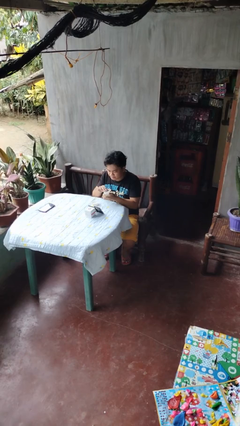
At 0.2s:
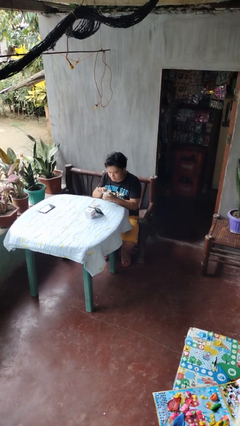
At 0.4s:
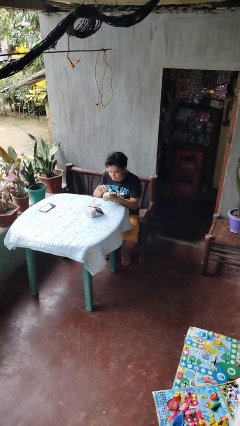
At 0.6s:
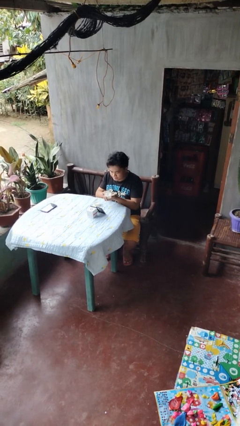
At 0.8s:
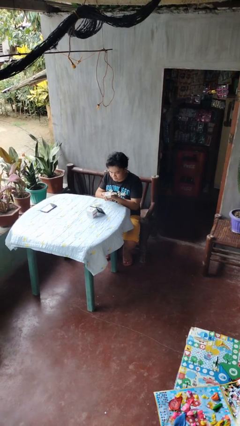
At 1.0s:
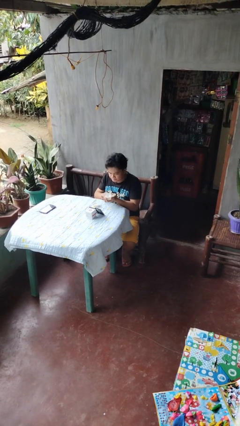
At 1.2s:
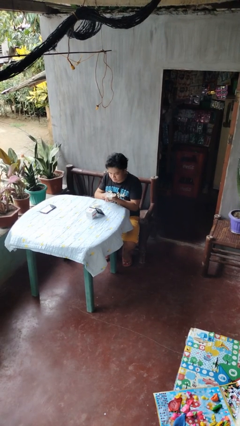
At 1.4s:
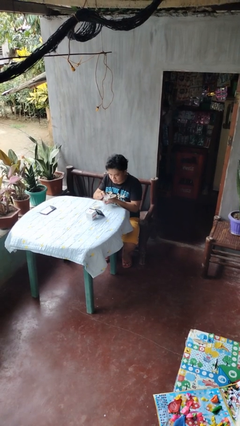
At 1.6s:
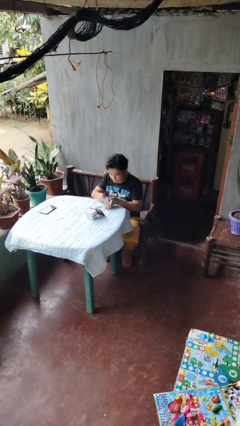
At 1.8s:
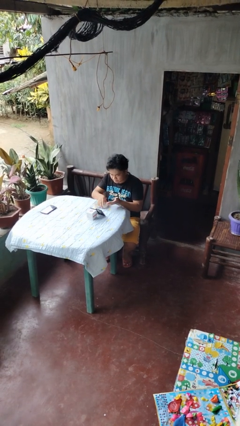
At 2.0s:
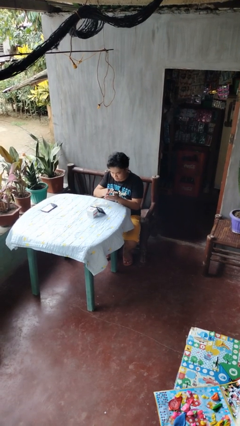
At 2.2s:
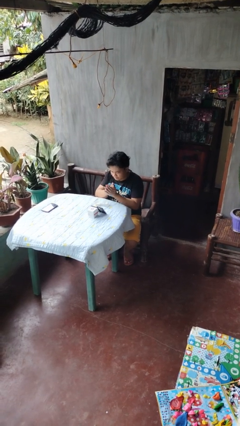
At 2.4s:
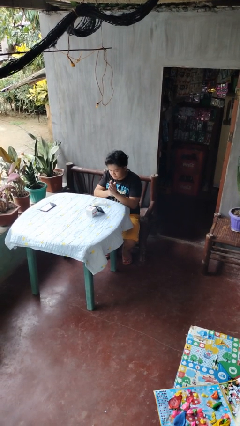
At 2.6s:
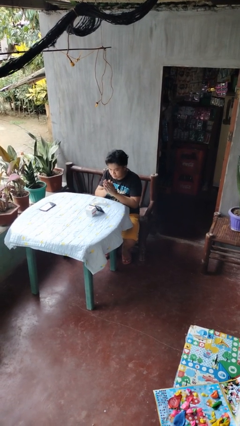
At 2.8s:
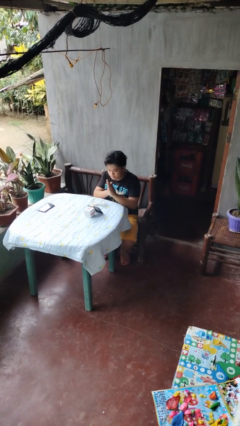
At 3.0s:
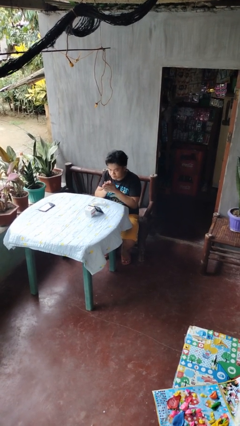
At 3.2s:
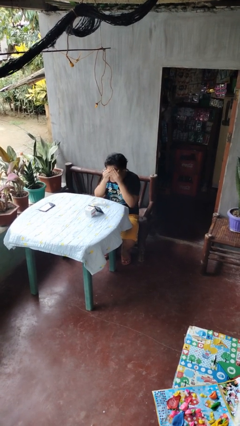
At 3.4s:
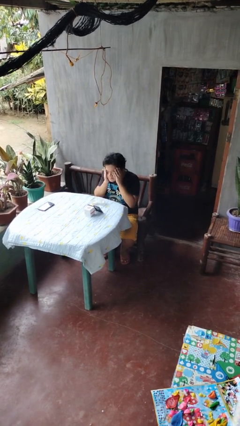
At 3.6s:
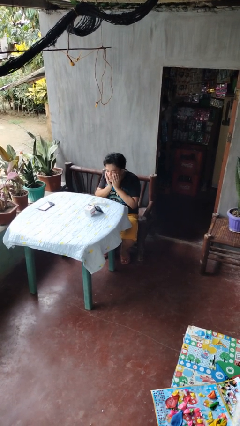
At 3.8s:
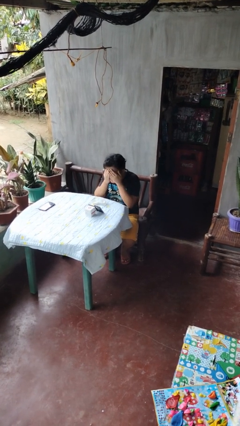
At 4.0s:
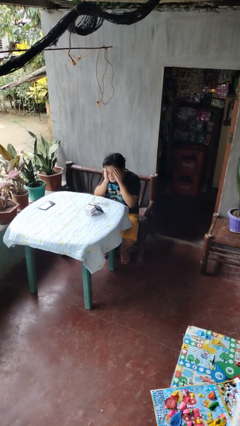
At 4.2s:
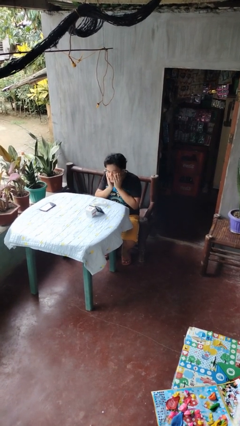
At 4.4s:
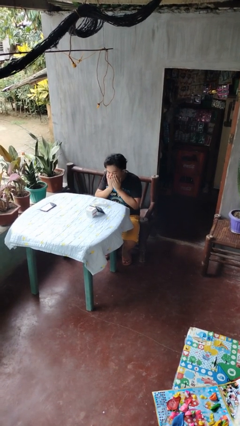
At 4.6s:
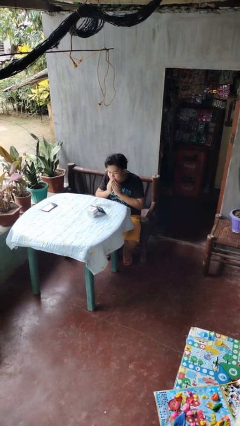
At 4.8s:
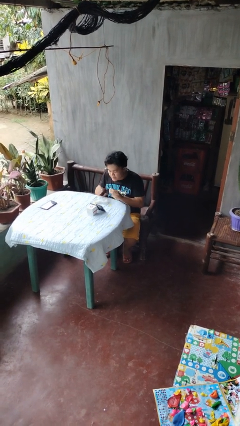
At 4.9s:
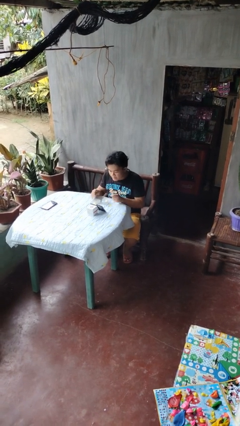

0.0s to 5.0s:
person applies facial moisturizer

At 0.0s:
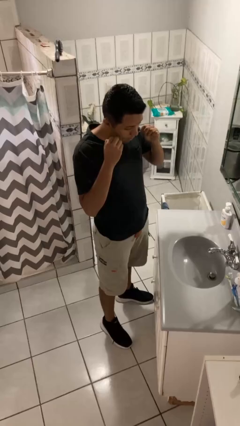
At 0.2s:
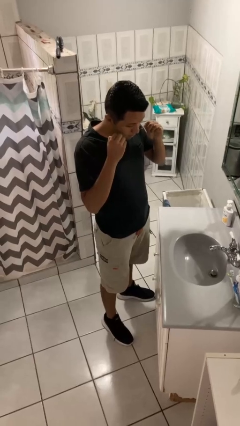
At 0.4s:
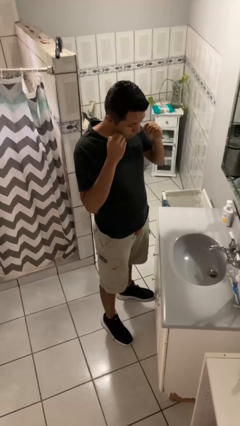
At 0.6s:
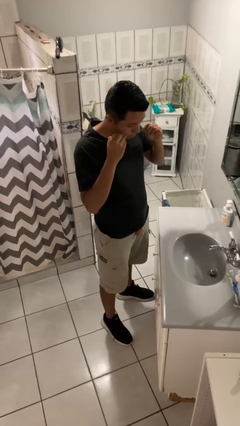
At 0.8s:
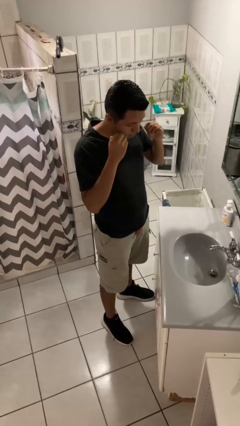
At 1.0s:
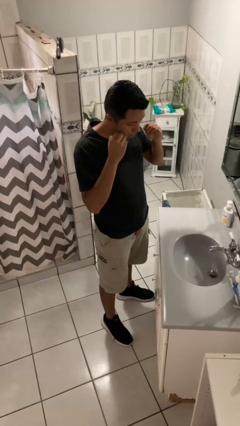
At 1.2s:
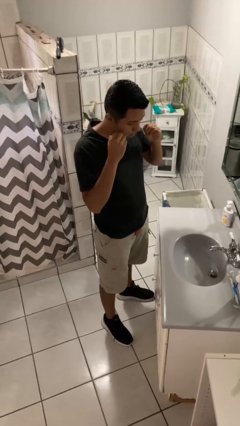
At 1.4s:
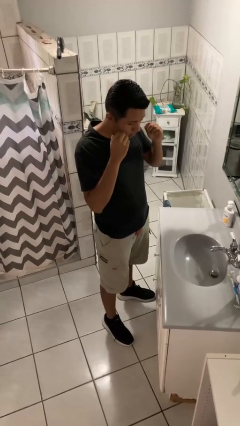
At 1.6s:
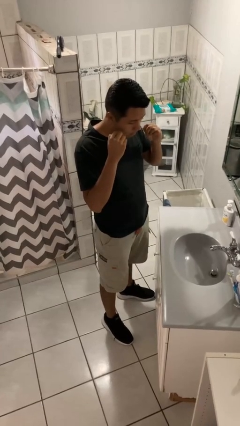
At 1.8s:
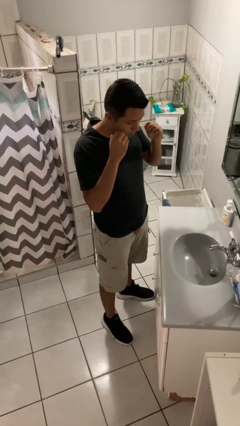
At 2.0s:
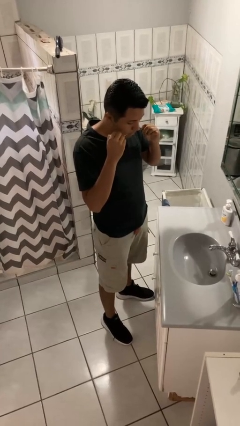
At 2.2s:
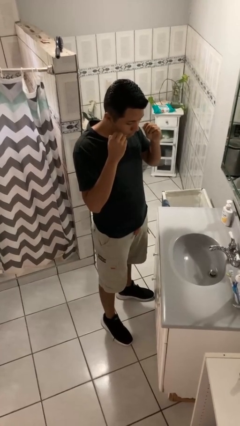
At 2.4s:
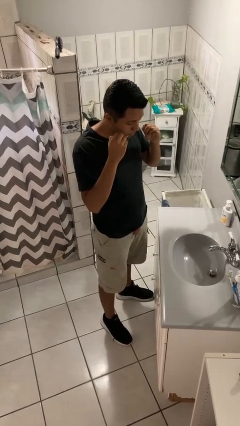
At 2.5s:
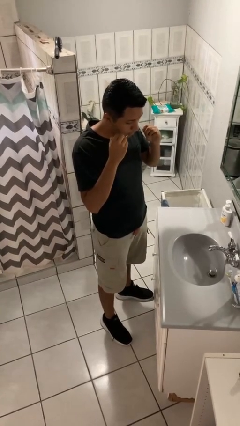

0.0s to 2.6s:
person flosses

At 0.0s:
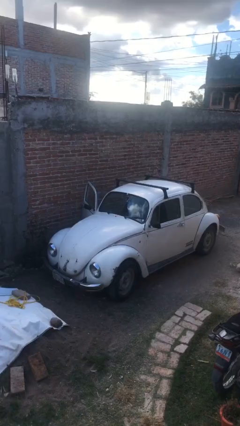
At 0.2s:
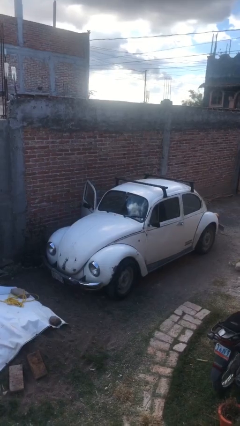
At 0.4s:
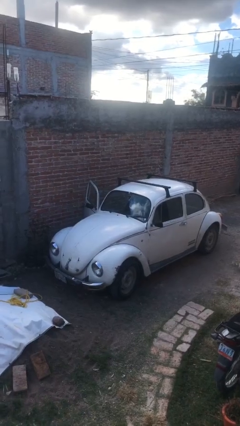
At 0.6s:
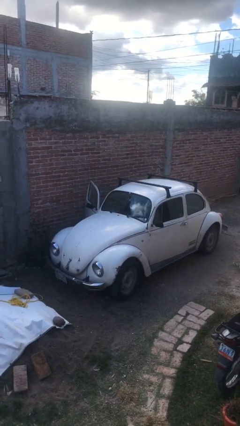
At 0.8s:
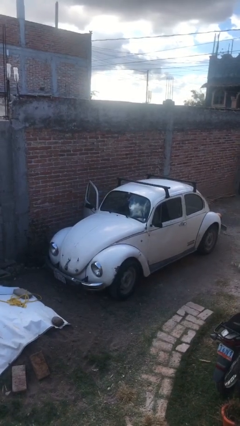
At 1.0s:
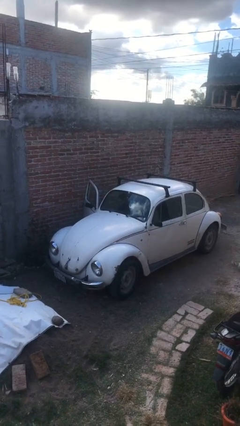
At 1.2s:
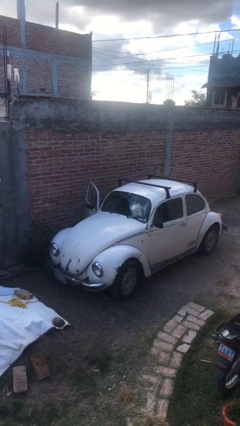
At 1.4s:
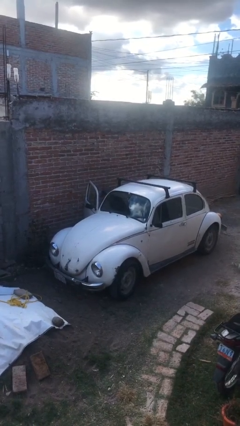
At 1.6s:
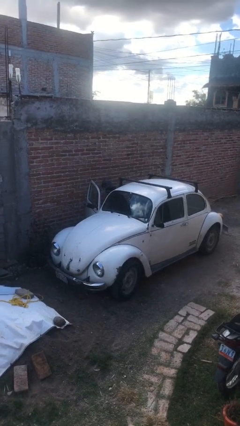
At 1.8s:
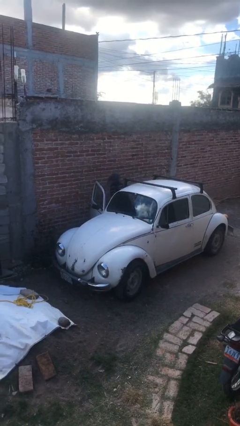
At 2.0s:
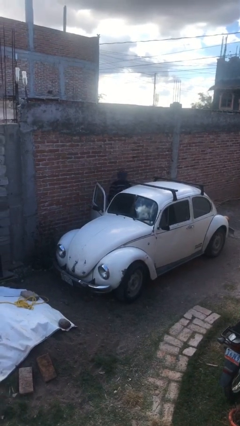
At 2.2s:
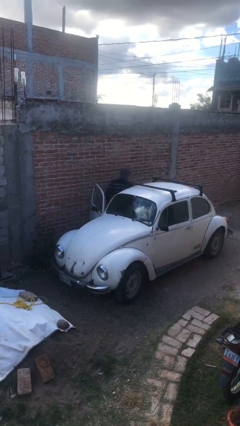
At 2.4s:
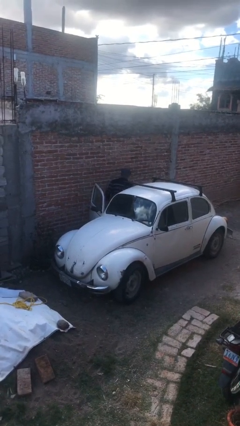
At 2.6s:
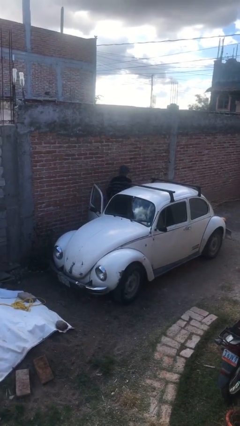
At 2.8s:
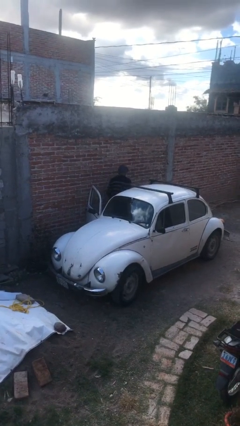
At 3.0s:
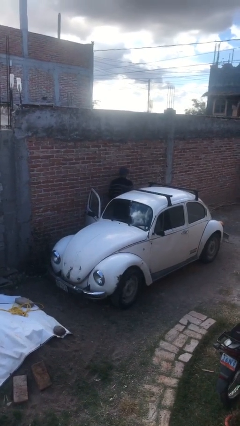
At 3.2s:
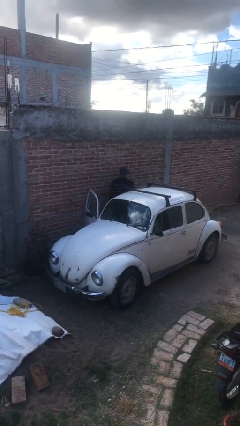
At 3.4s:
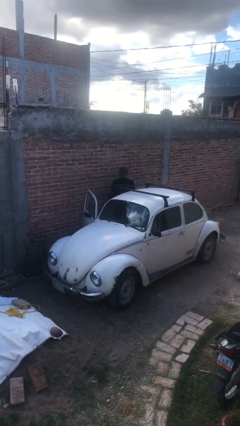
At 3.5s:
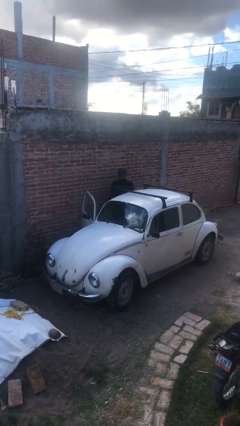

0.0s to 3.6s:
person exits car

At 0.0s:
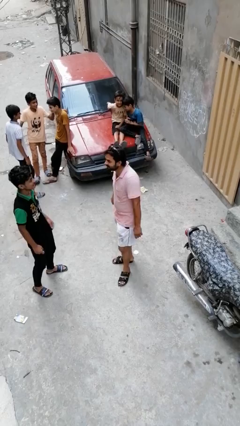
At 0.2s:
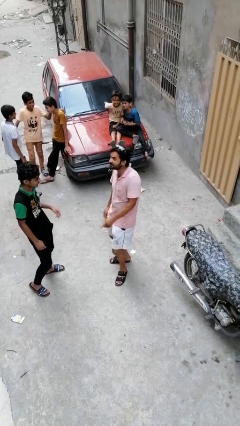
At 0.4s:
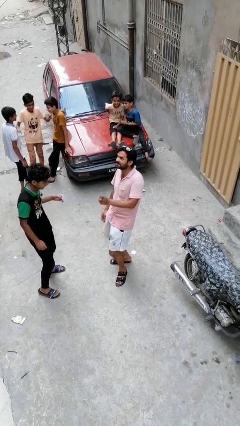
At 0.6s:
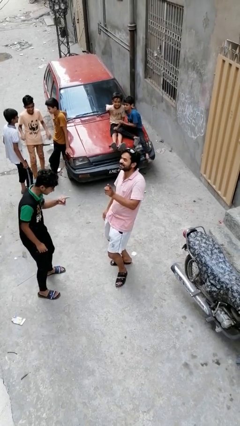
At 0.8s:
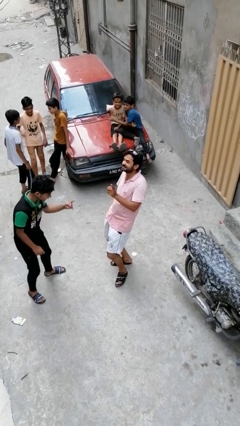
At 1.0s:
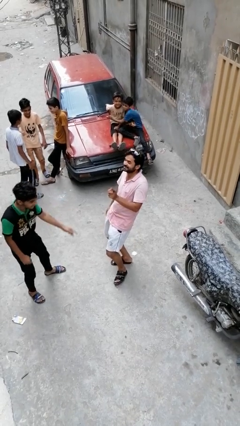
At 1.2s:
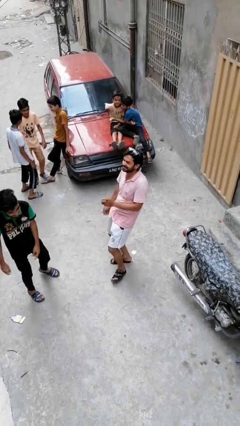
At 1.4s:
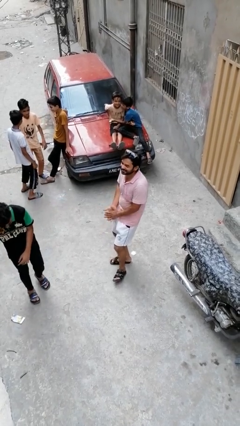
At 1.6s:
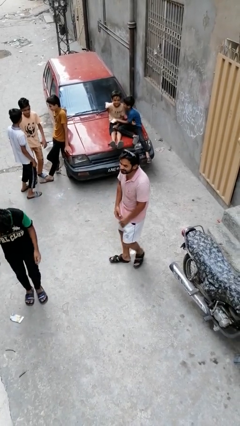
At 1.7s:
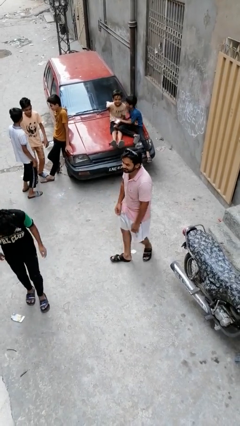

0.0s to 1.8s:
person laughs with person

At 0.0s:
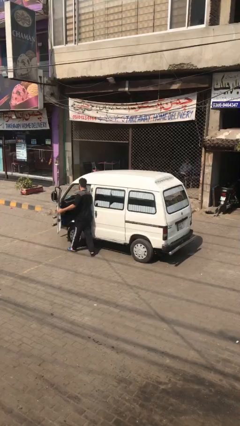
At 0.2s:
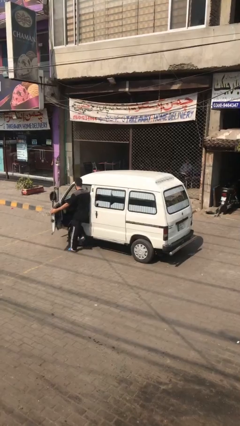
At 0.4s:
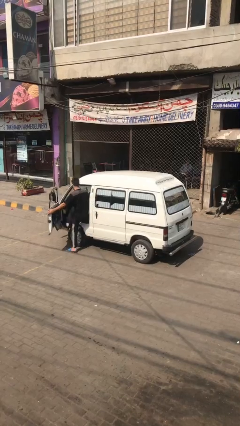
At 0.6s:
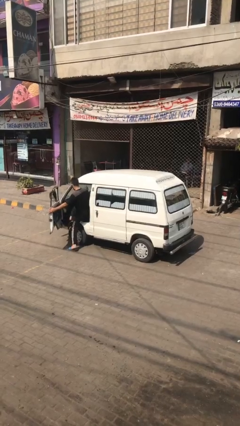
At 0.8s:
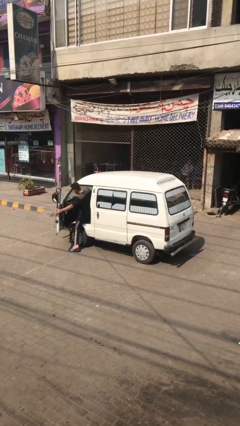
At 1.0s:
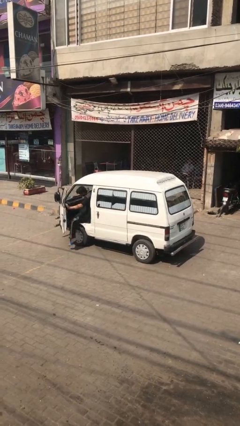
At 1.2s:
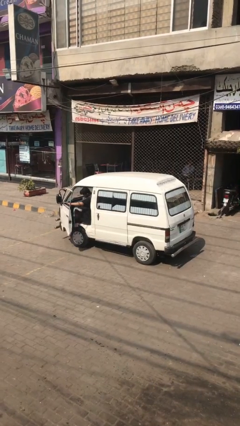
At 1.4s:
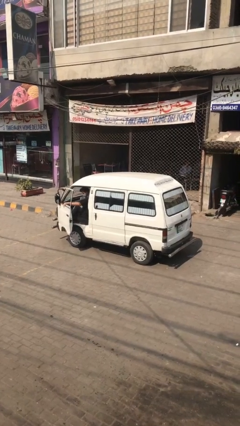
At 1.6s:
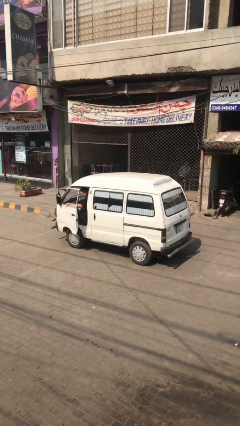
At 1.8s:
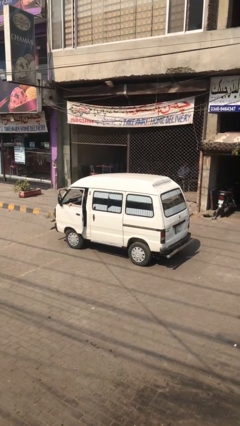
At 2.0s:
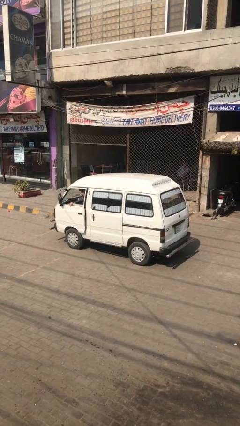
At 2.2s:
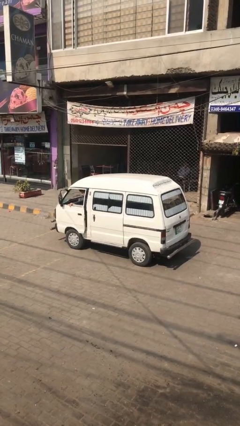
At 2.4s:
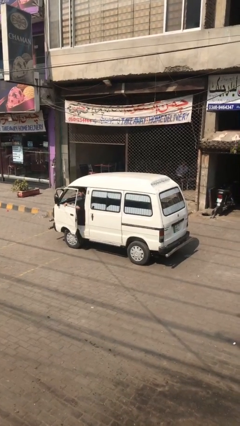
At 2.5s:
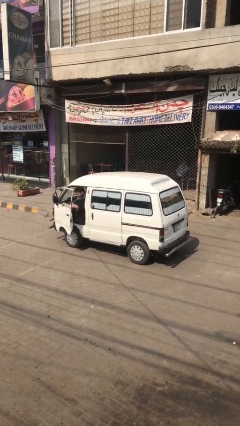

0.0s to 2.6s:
car picks up person

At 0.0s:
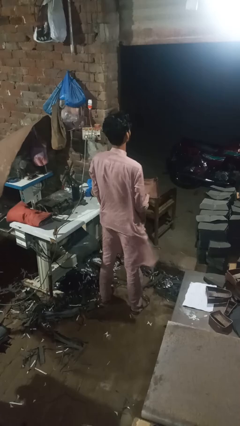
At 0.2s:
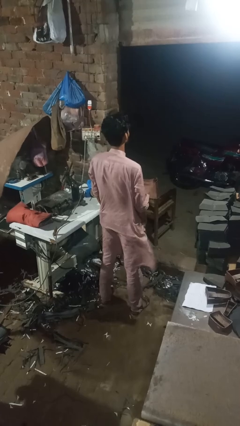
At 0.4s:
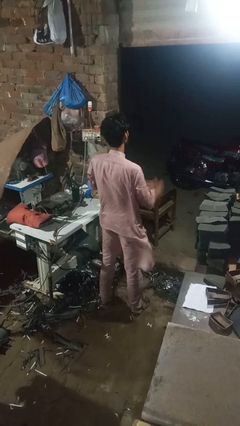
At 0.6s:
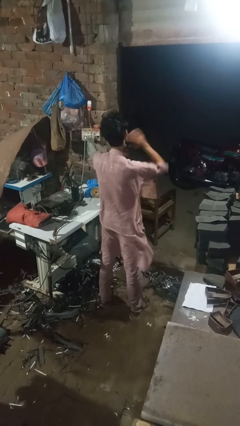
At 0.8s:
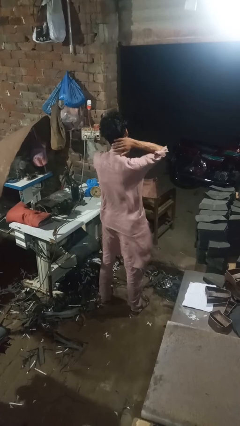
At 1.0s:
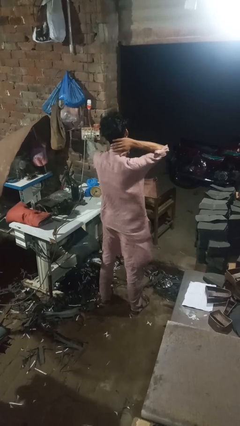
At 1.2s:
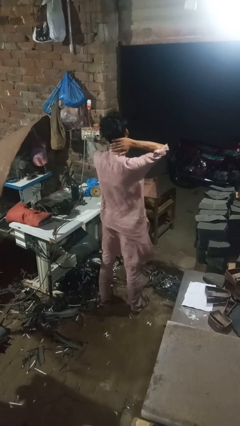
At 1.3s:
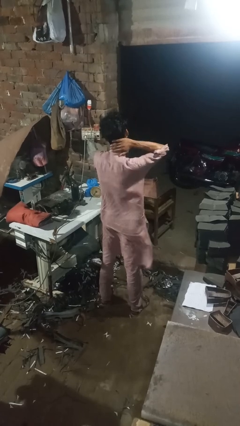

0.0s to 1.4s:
person rubs neck

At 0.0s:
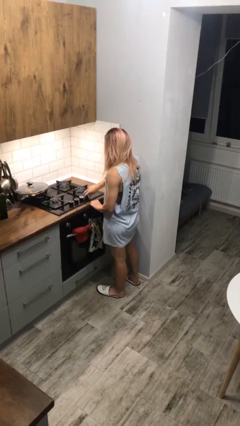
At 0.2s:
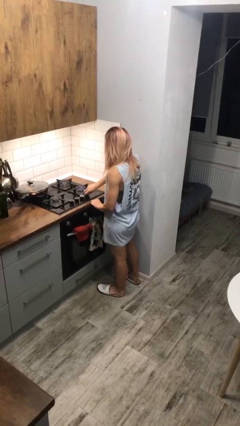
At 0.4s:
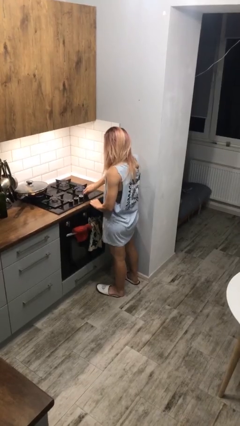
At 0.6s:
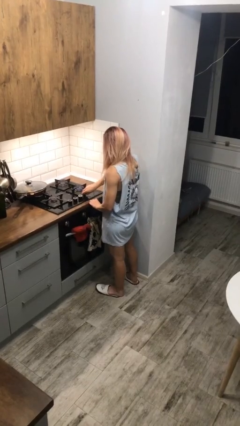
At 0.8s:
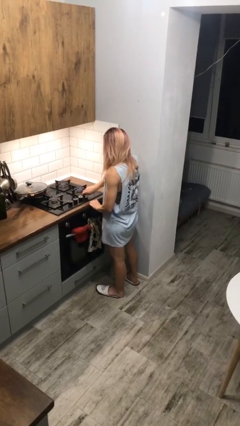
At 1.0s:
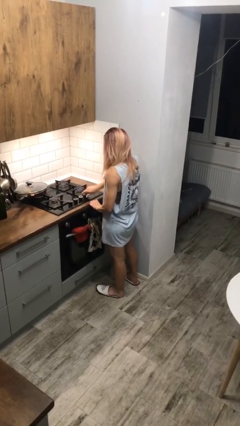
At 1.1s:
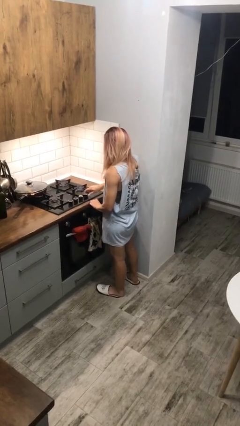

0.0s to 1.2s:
person turns off stovetop
